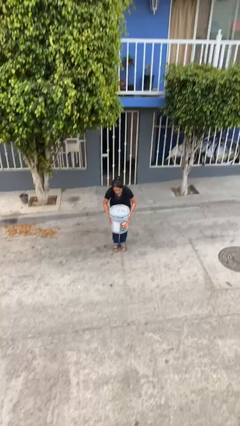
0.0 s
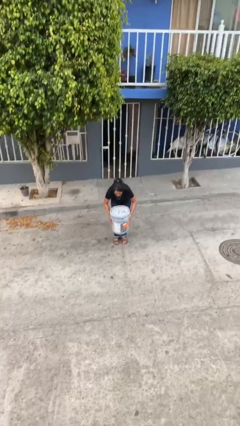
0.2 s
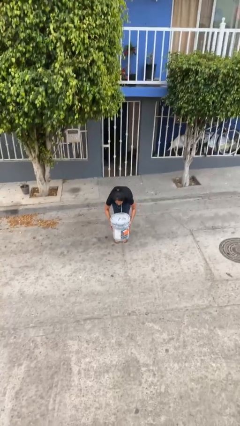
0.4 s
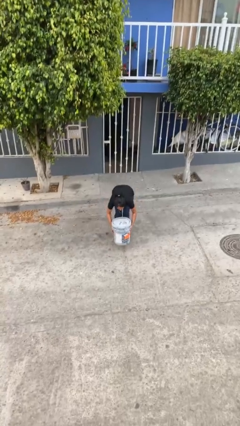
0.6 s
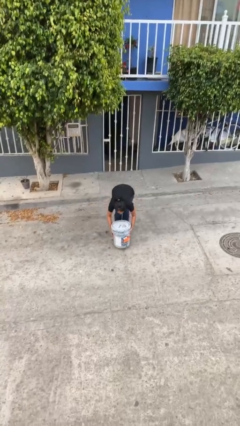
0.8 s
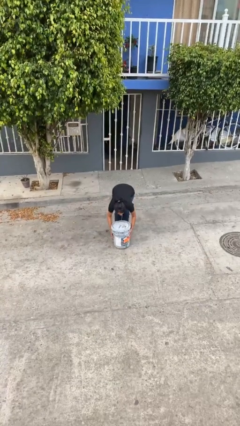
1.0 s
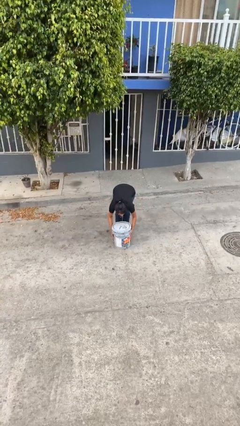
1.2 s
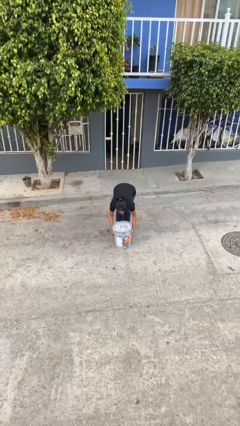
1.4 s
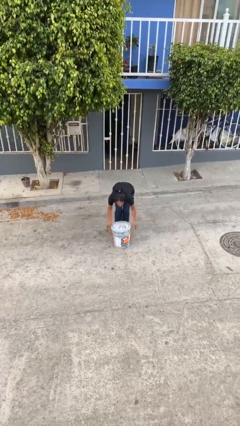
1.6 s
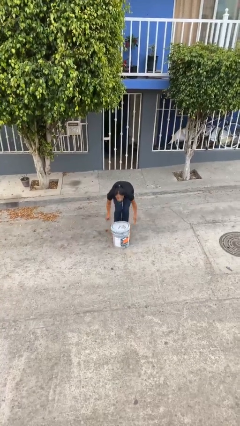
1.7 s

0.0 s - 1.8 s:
person puts down object on floor

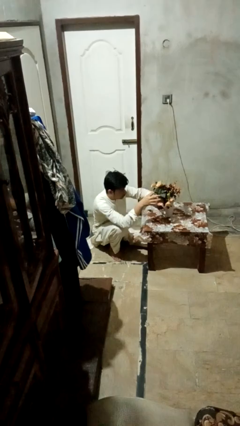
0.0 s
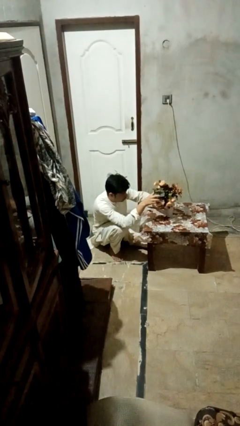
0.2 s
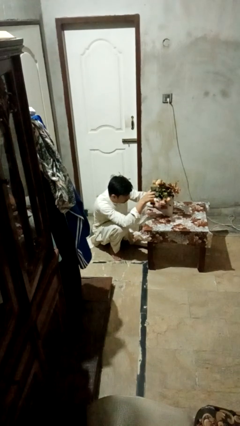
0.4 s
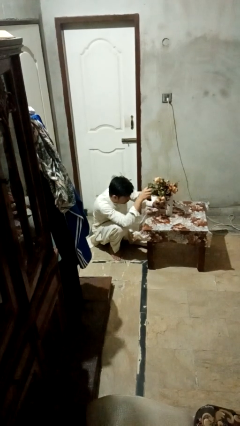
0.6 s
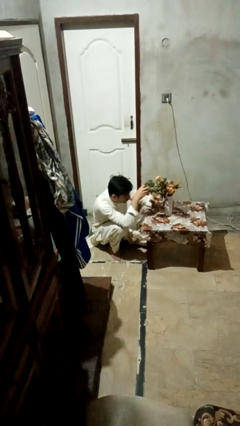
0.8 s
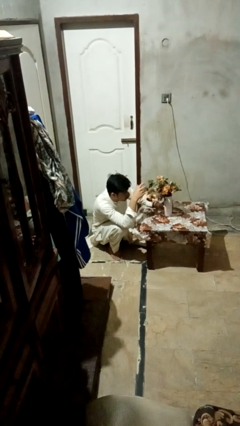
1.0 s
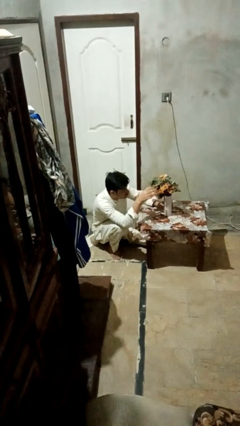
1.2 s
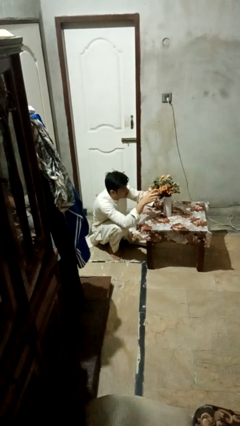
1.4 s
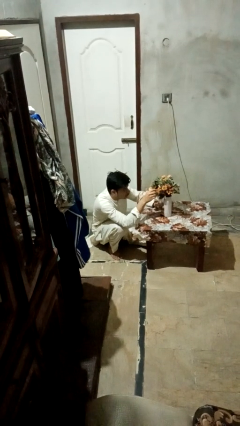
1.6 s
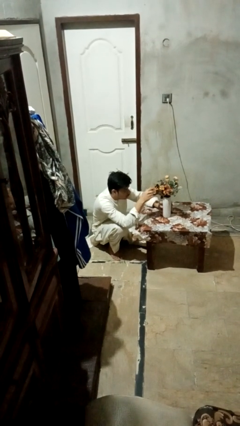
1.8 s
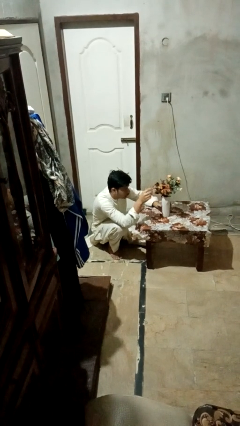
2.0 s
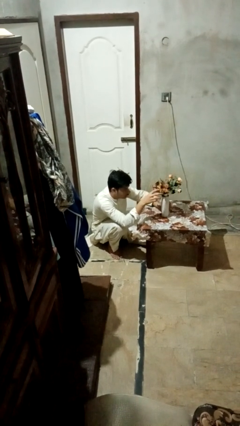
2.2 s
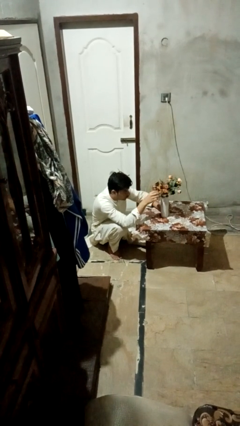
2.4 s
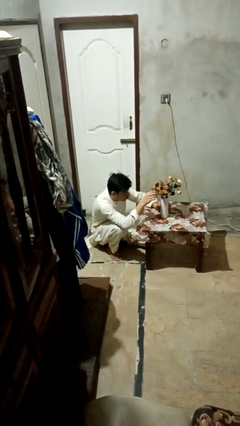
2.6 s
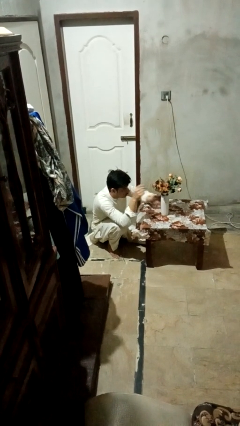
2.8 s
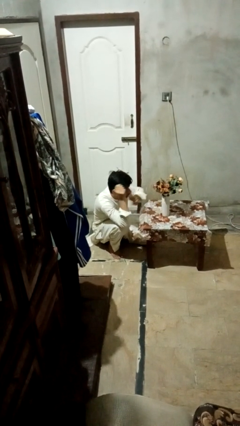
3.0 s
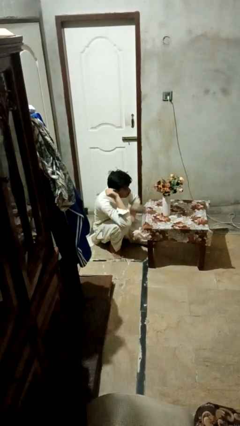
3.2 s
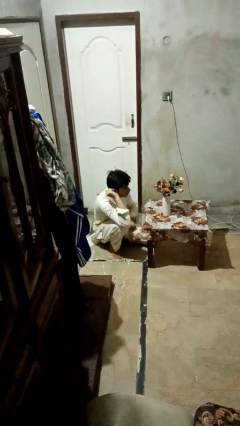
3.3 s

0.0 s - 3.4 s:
person arranges flowers in vase

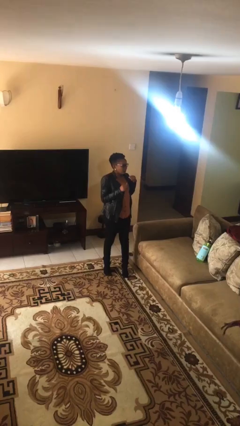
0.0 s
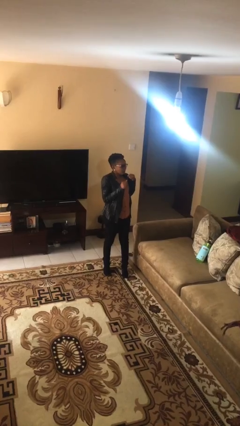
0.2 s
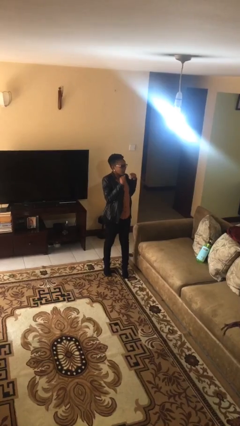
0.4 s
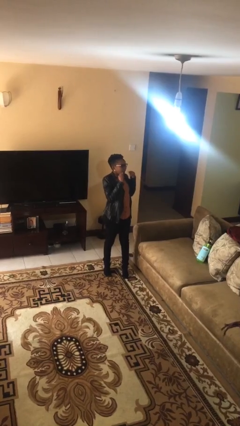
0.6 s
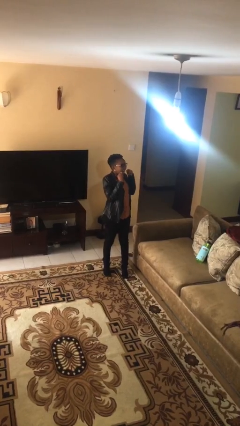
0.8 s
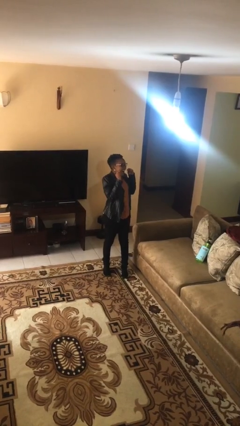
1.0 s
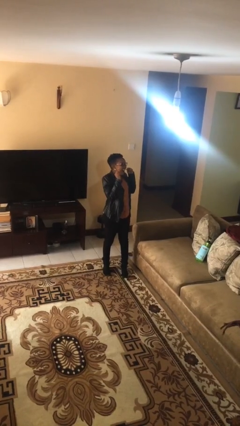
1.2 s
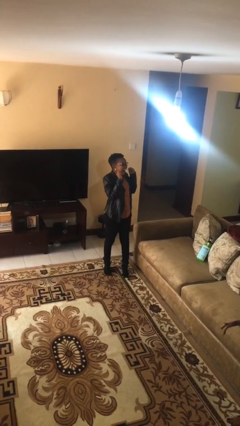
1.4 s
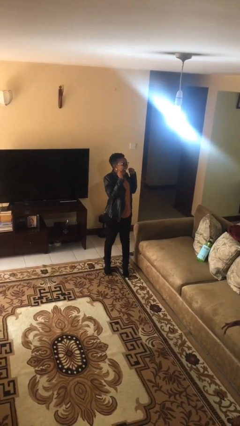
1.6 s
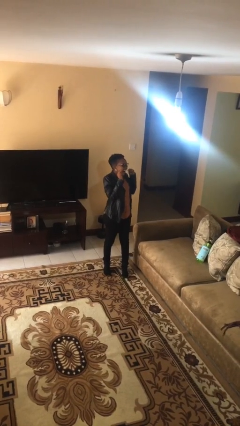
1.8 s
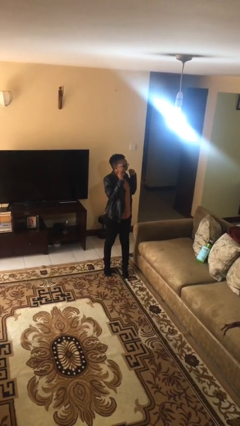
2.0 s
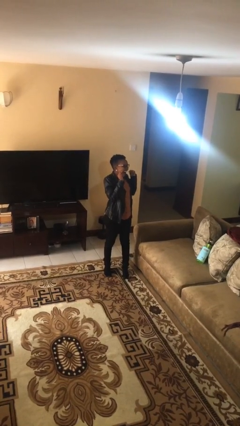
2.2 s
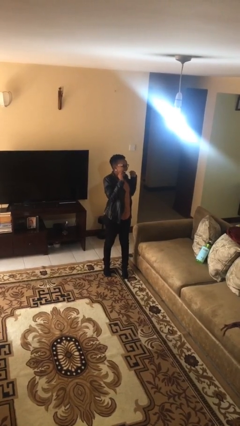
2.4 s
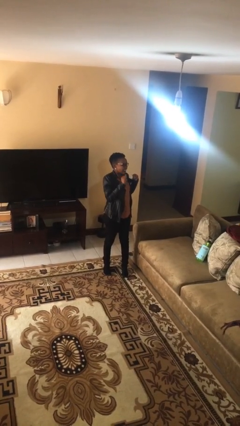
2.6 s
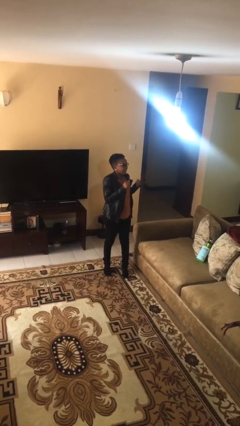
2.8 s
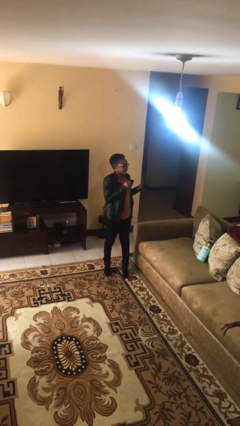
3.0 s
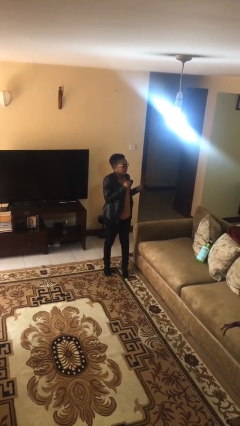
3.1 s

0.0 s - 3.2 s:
person flosses

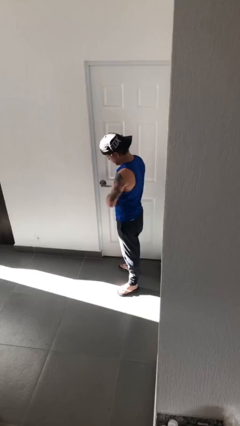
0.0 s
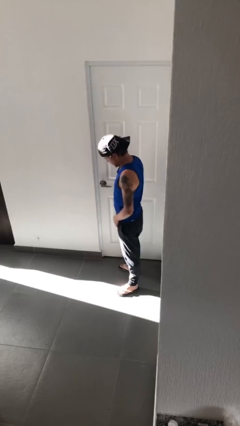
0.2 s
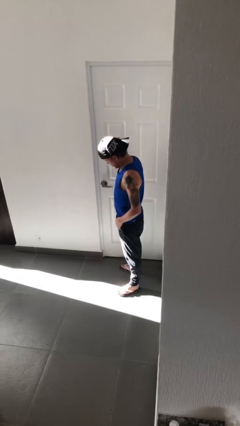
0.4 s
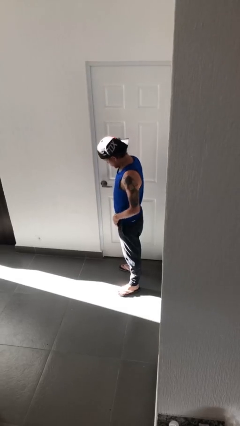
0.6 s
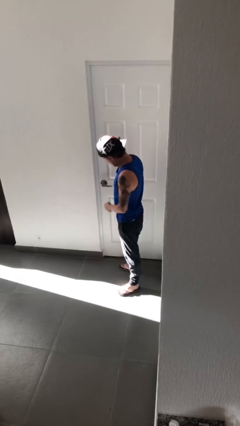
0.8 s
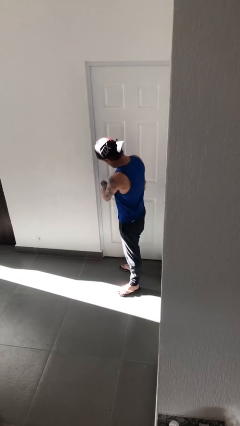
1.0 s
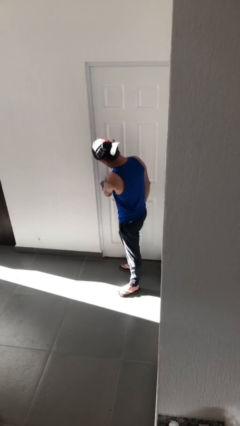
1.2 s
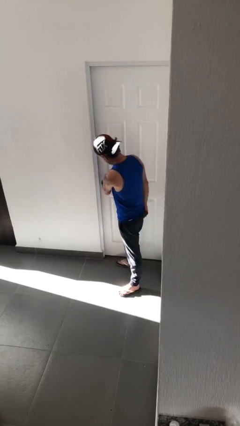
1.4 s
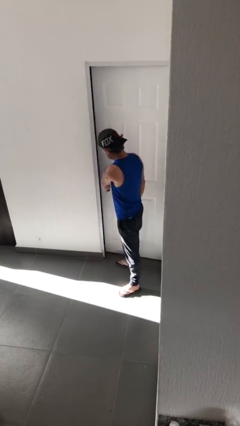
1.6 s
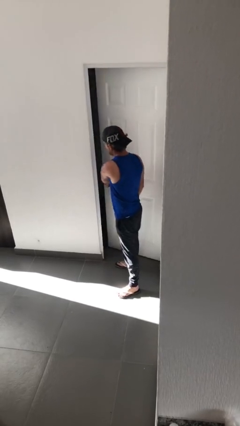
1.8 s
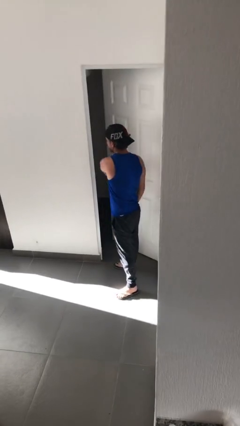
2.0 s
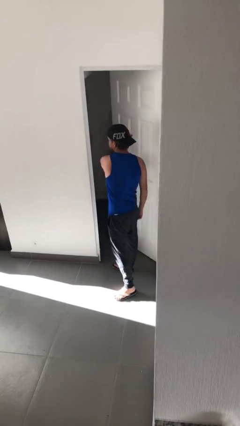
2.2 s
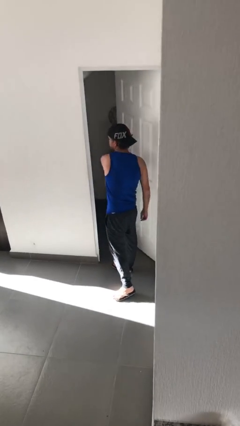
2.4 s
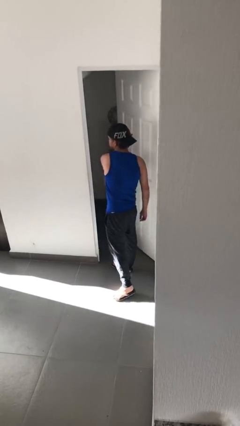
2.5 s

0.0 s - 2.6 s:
person opens facility door

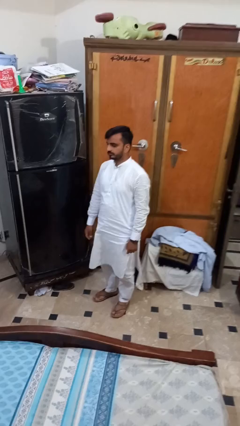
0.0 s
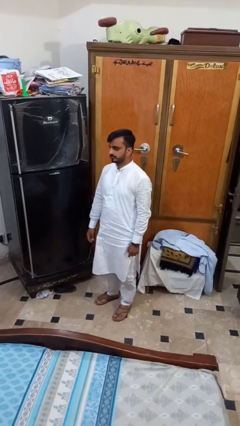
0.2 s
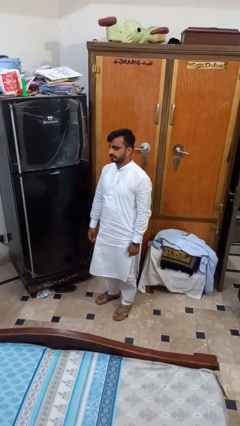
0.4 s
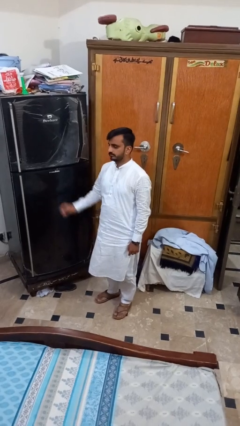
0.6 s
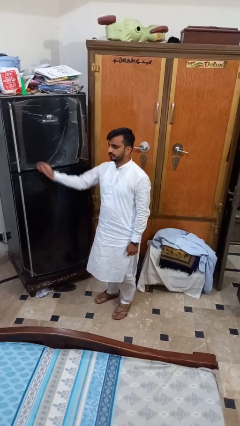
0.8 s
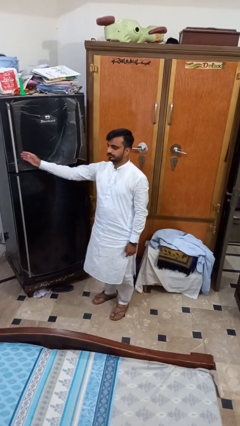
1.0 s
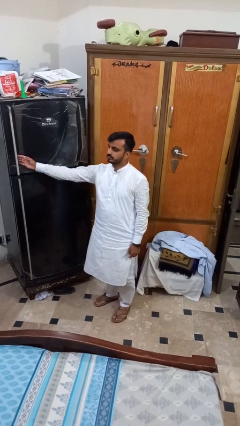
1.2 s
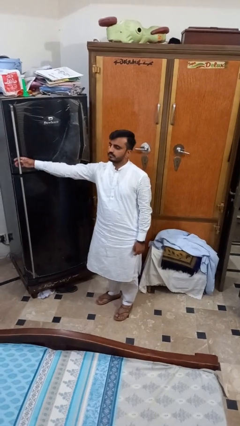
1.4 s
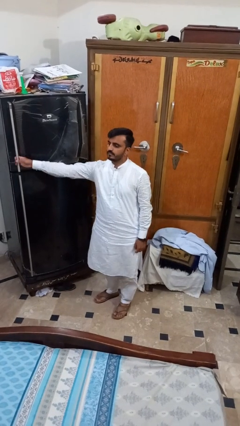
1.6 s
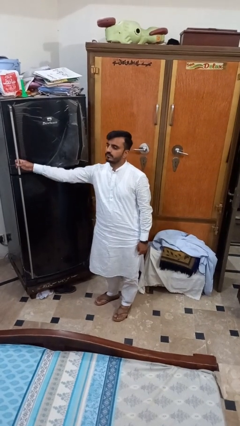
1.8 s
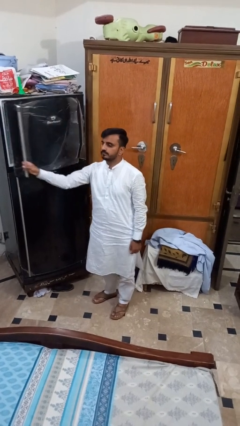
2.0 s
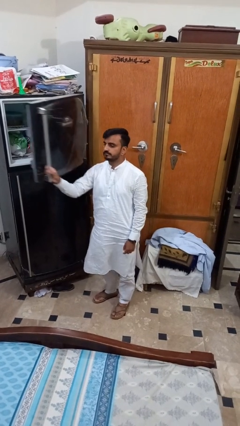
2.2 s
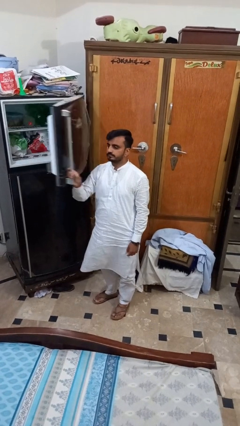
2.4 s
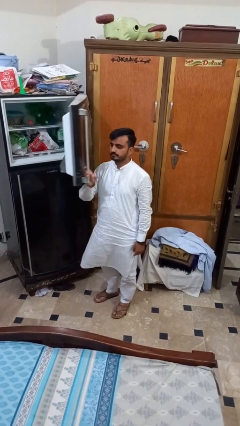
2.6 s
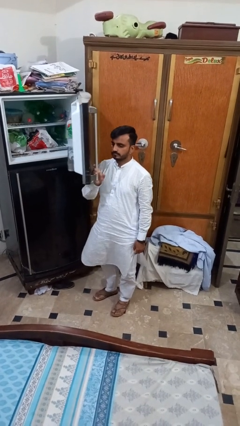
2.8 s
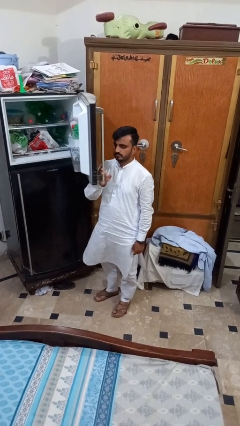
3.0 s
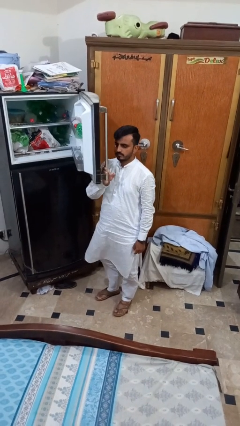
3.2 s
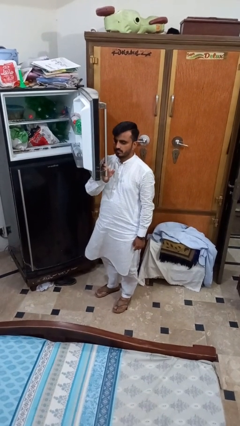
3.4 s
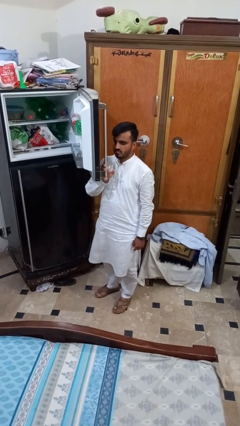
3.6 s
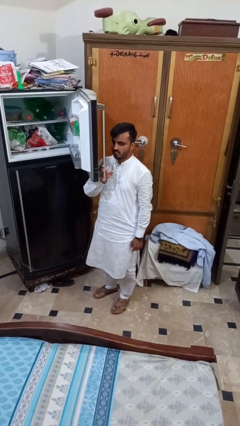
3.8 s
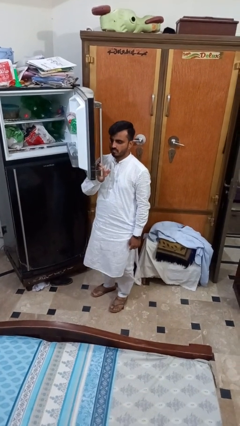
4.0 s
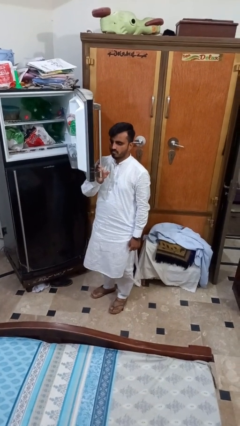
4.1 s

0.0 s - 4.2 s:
person opens refrigerator

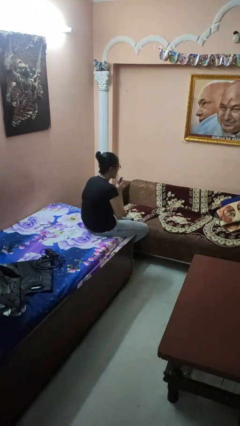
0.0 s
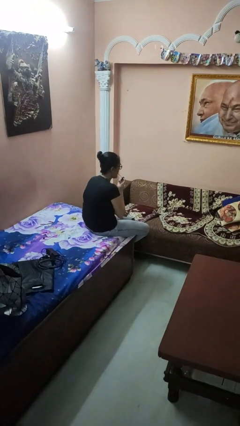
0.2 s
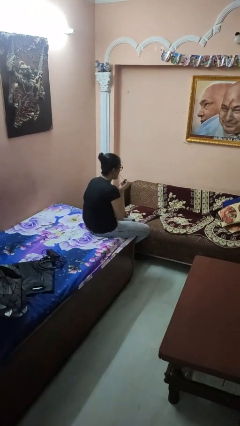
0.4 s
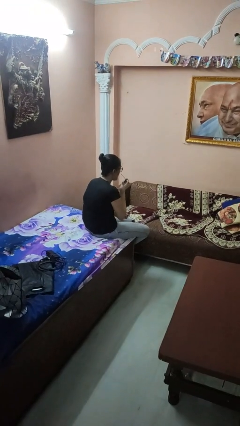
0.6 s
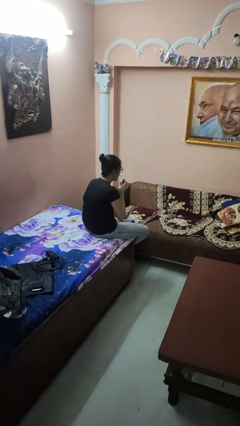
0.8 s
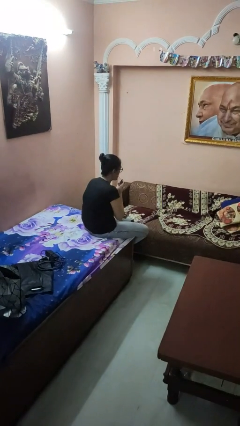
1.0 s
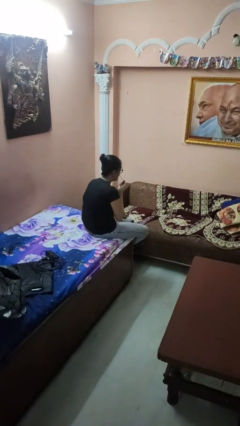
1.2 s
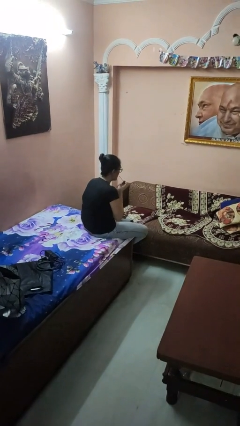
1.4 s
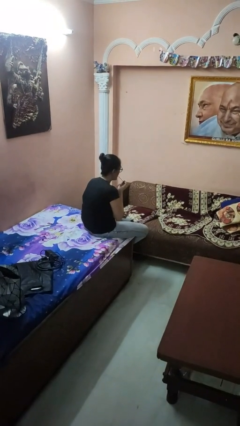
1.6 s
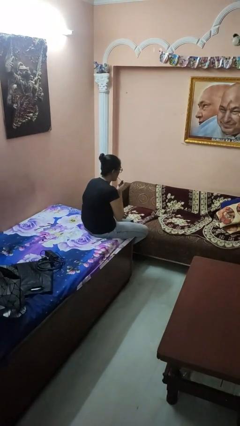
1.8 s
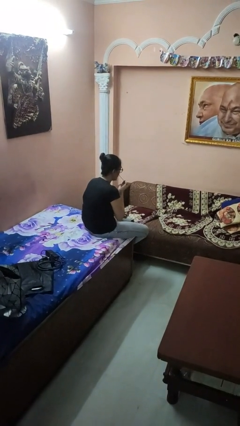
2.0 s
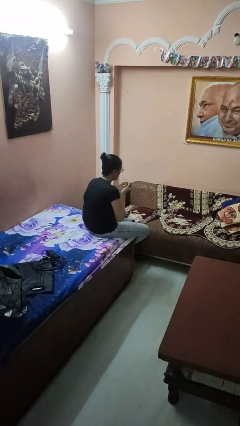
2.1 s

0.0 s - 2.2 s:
person applies lip makeup
